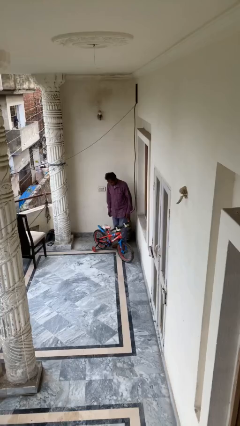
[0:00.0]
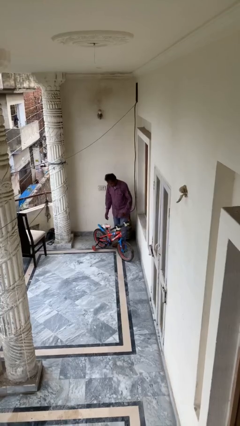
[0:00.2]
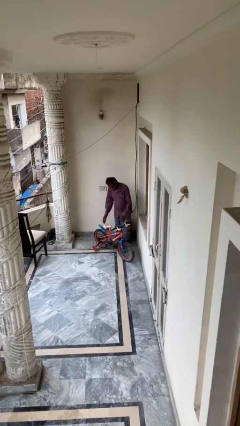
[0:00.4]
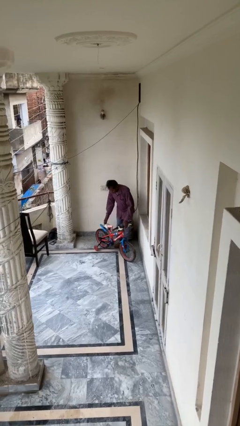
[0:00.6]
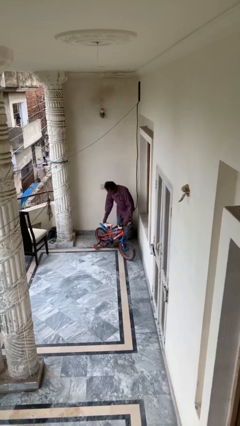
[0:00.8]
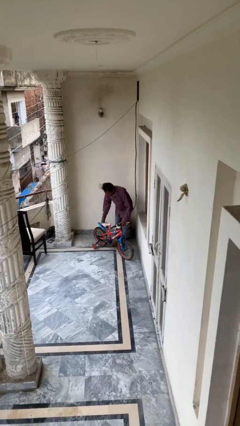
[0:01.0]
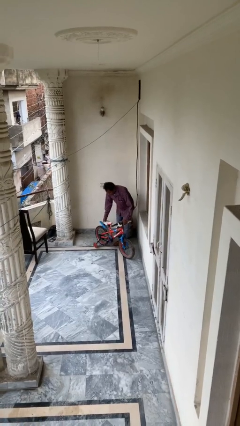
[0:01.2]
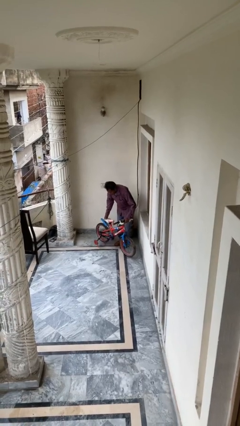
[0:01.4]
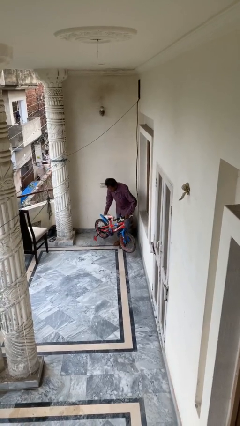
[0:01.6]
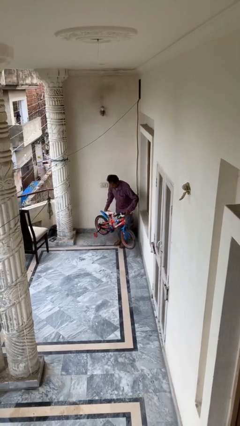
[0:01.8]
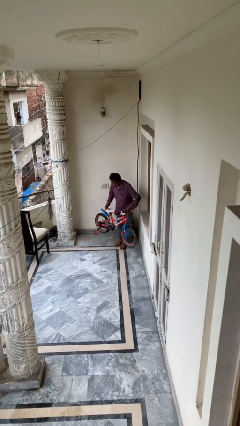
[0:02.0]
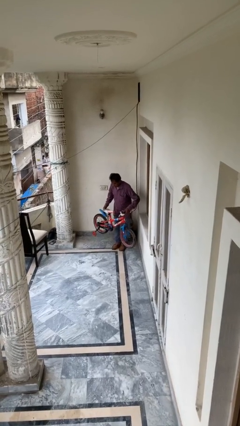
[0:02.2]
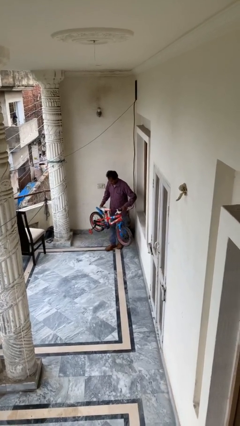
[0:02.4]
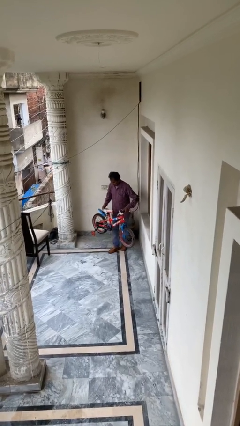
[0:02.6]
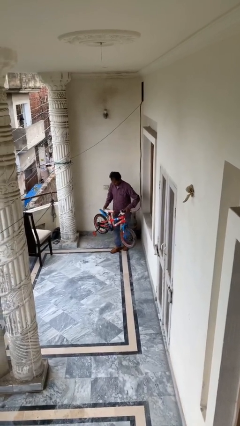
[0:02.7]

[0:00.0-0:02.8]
person picks up object from floor

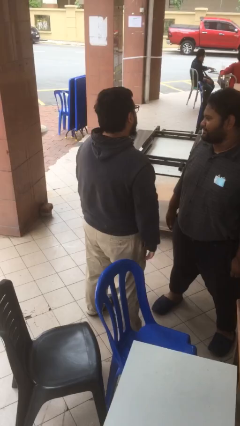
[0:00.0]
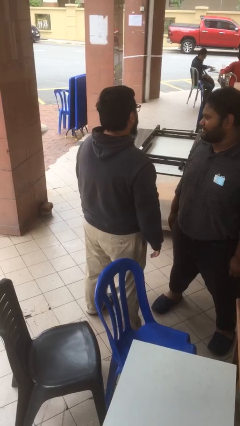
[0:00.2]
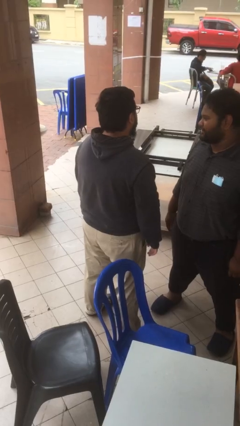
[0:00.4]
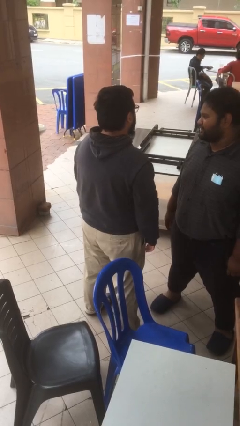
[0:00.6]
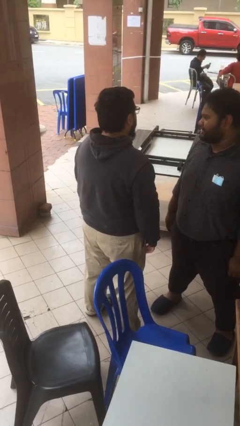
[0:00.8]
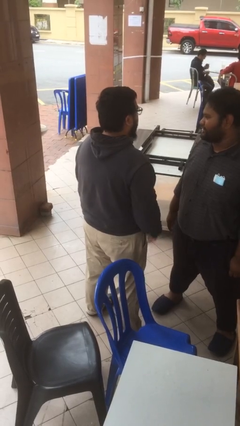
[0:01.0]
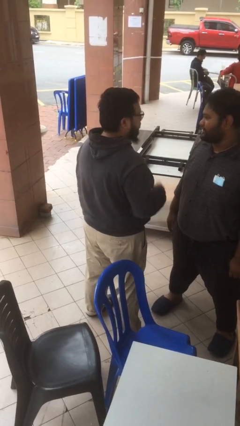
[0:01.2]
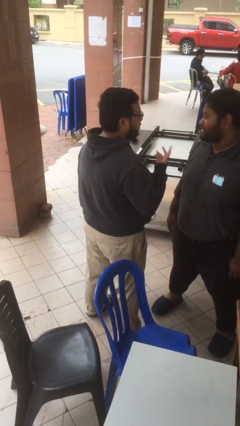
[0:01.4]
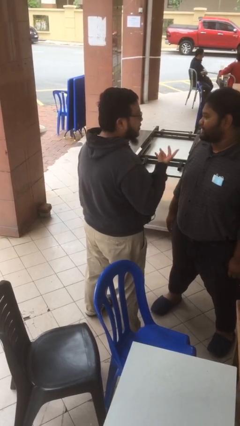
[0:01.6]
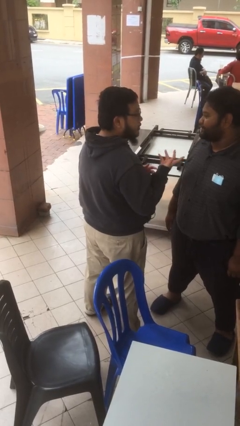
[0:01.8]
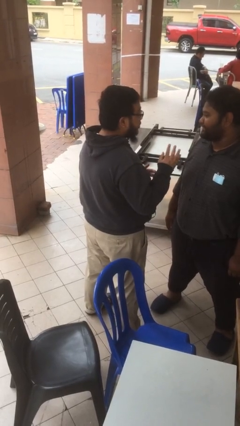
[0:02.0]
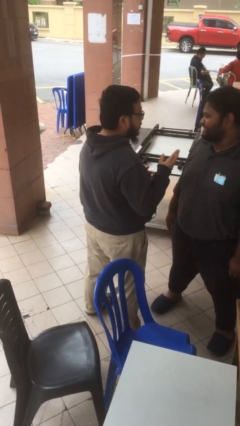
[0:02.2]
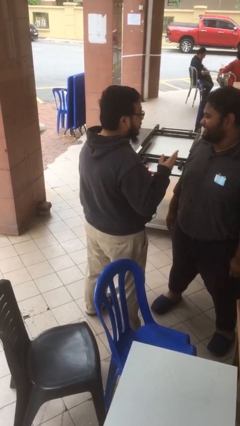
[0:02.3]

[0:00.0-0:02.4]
person talks to person

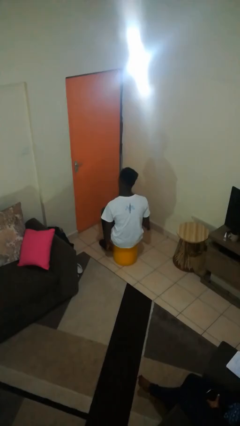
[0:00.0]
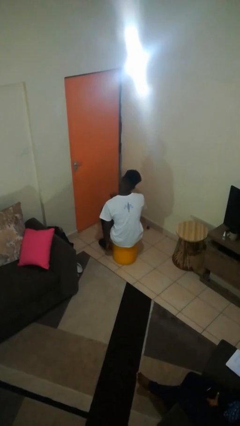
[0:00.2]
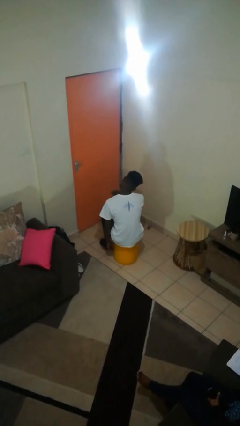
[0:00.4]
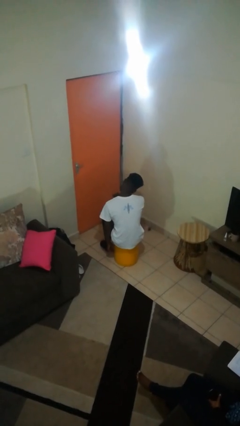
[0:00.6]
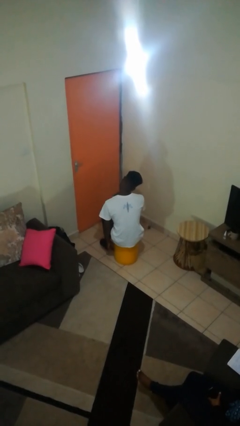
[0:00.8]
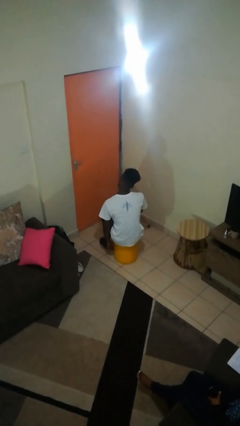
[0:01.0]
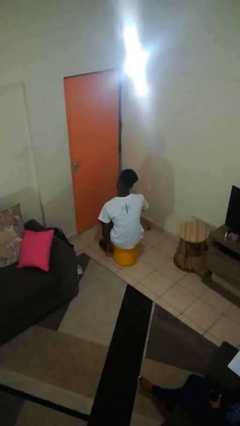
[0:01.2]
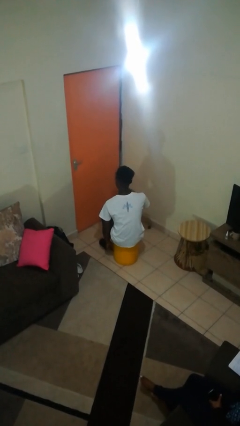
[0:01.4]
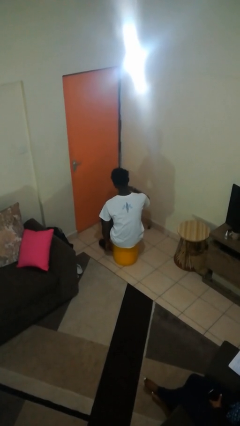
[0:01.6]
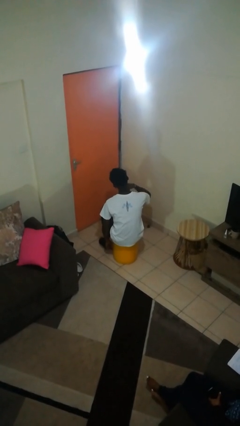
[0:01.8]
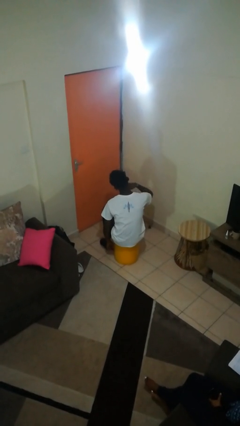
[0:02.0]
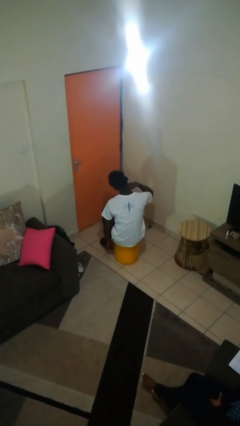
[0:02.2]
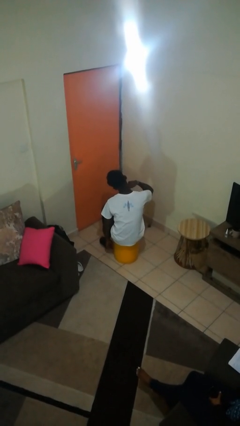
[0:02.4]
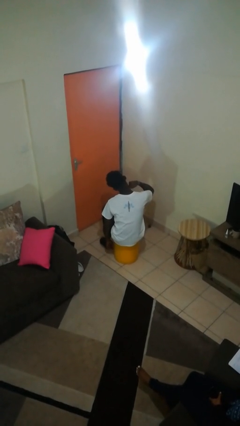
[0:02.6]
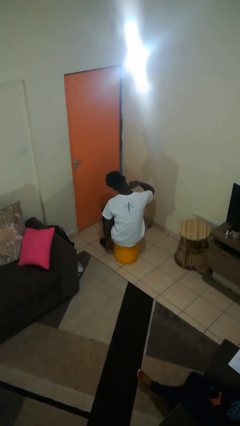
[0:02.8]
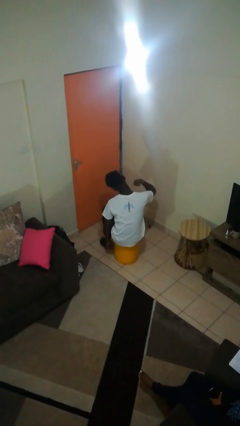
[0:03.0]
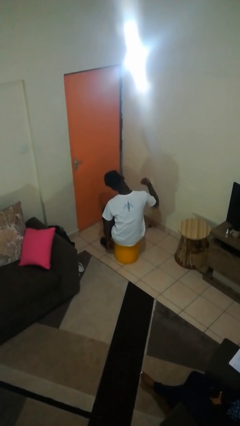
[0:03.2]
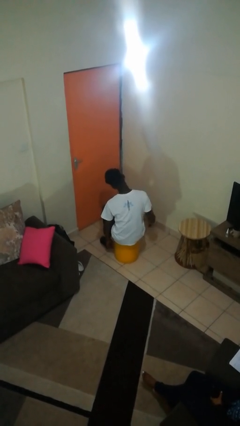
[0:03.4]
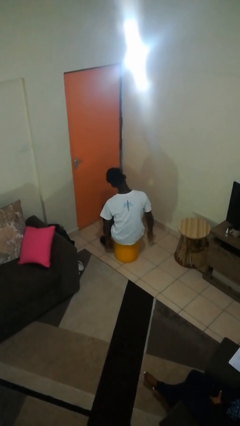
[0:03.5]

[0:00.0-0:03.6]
person gestures cut

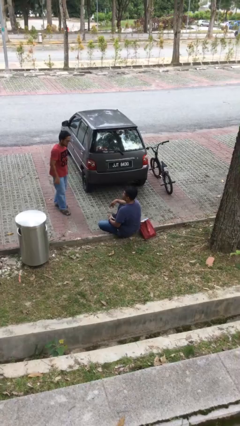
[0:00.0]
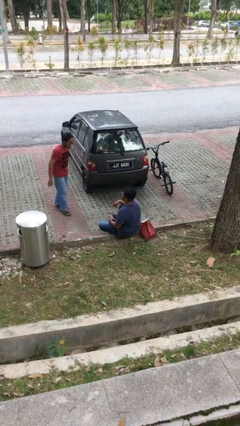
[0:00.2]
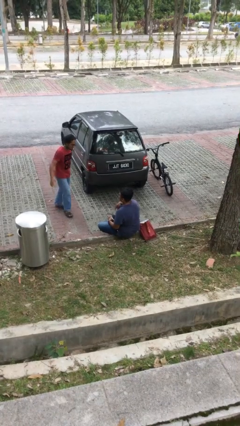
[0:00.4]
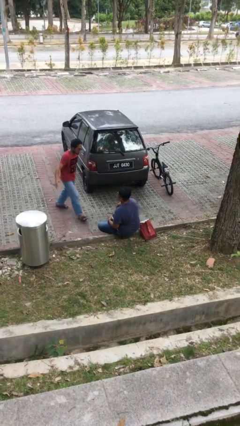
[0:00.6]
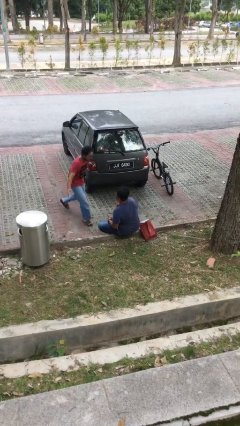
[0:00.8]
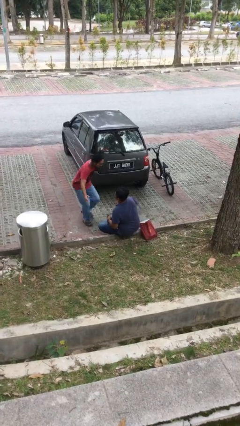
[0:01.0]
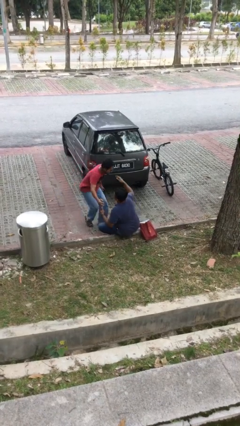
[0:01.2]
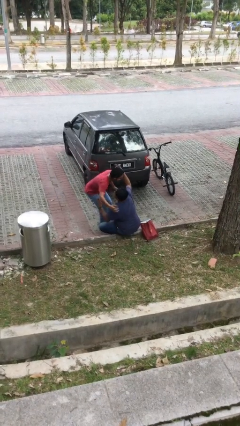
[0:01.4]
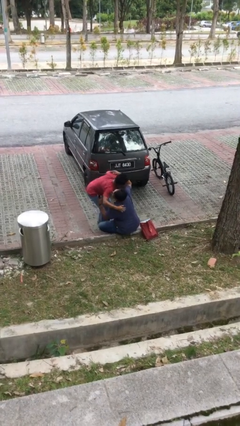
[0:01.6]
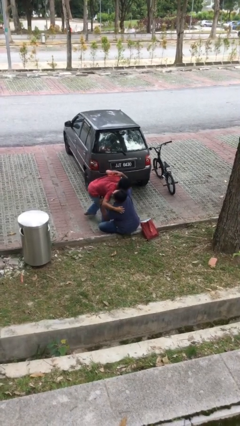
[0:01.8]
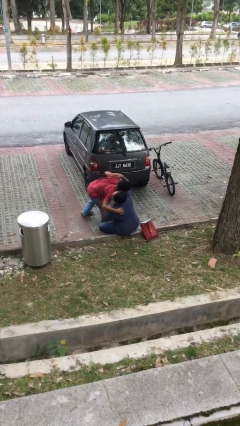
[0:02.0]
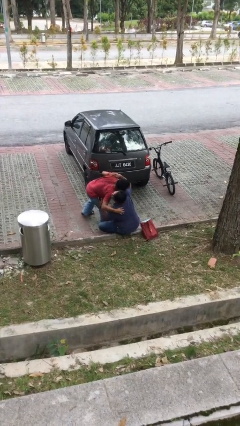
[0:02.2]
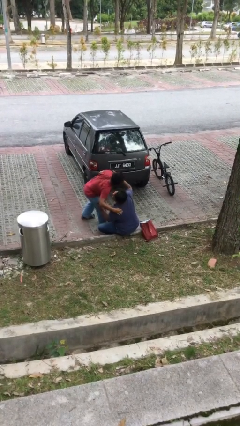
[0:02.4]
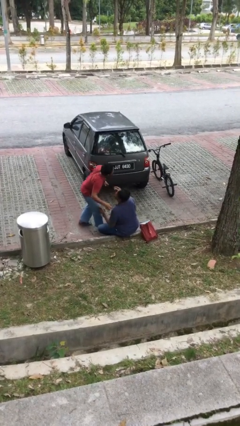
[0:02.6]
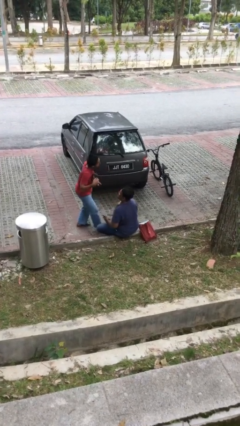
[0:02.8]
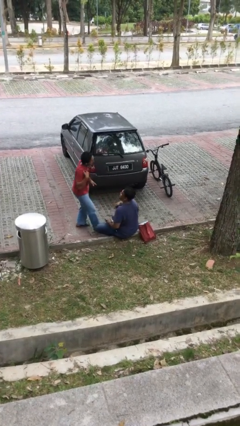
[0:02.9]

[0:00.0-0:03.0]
person embraces person

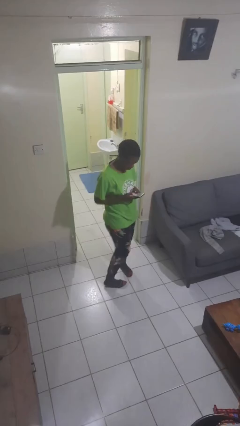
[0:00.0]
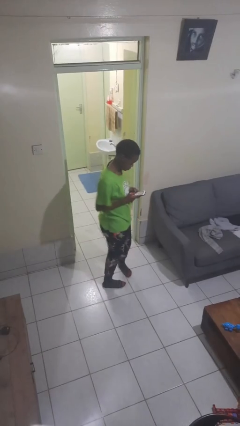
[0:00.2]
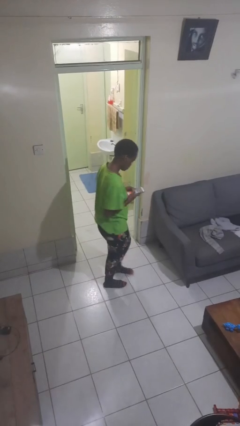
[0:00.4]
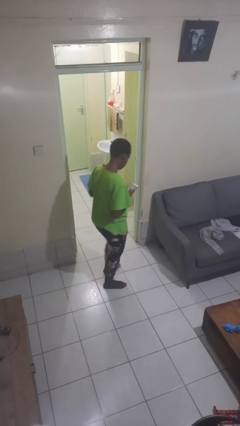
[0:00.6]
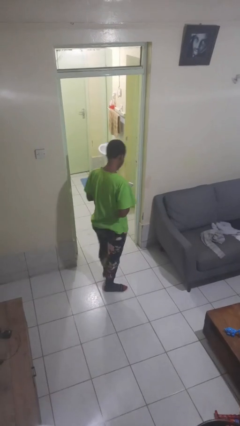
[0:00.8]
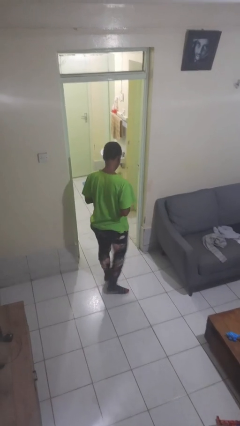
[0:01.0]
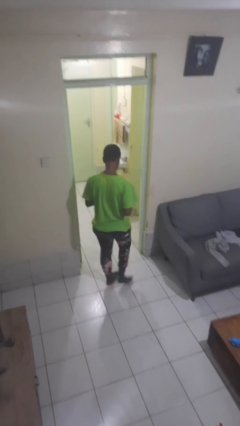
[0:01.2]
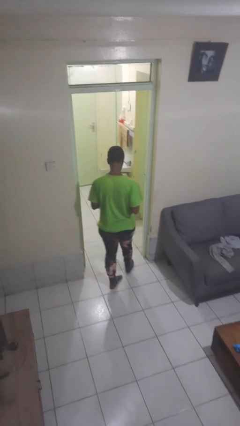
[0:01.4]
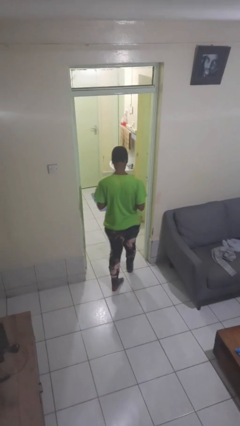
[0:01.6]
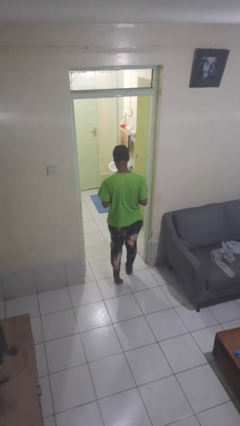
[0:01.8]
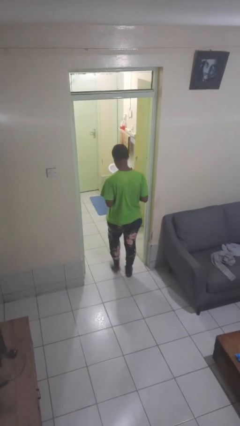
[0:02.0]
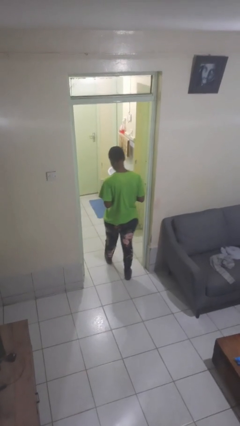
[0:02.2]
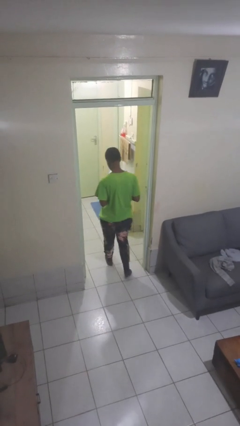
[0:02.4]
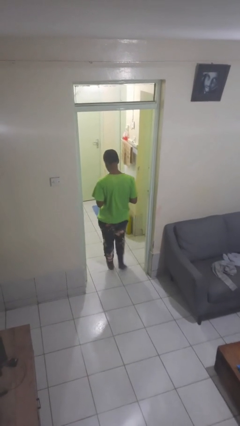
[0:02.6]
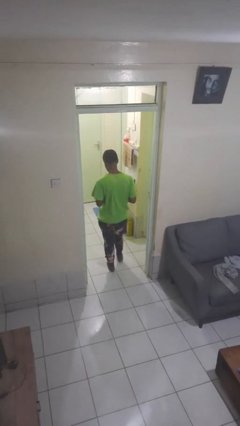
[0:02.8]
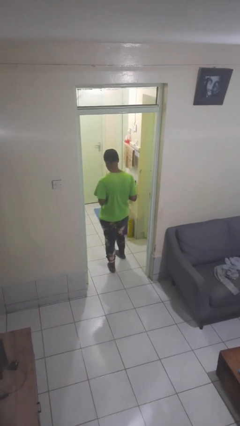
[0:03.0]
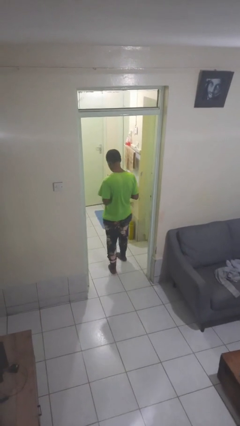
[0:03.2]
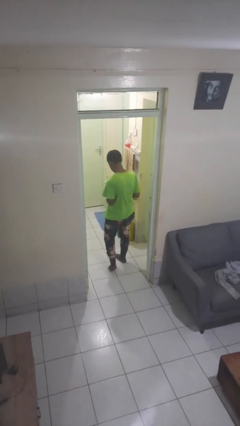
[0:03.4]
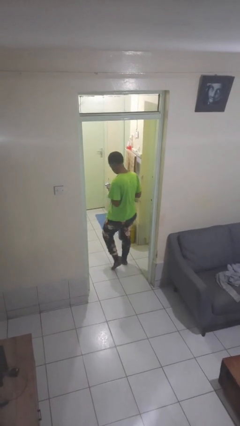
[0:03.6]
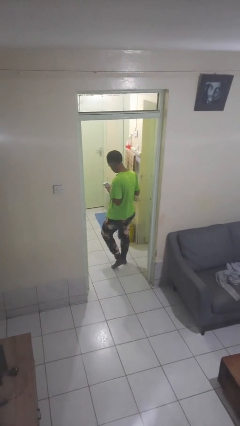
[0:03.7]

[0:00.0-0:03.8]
person exits scene through structure

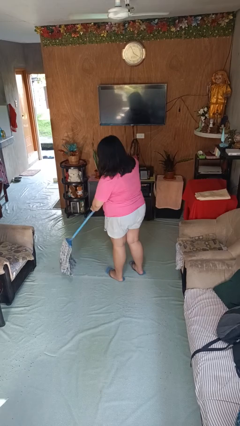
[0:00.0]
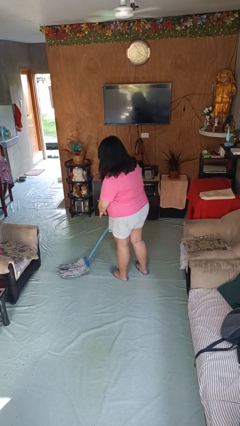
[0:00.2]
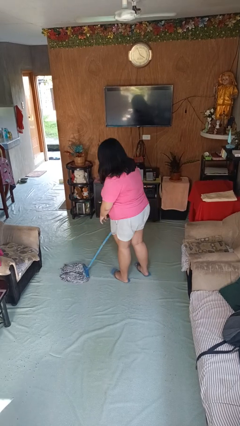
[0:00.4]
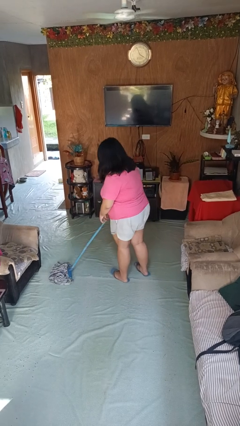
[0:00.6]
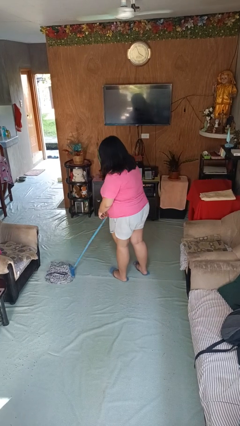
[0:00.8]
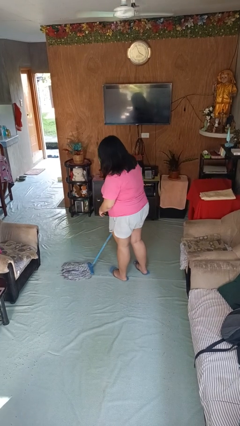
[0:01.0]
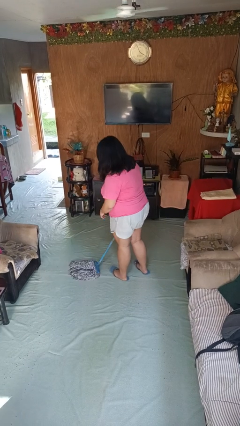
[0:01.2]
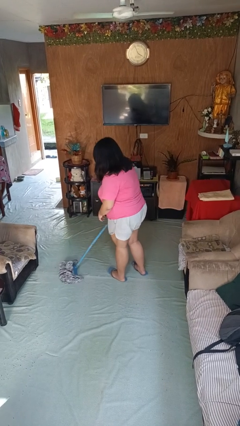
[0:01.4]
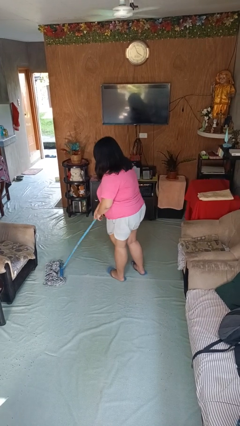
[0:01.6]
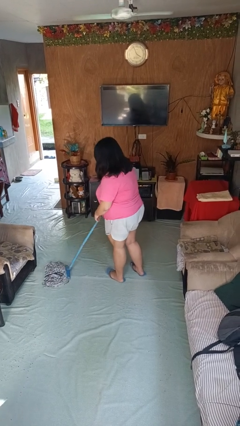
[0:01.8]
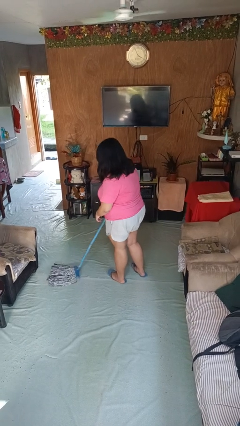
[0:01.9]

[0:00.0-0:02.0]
person mops
